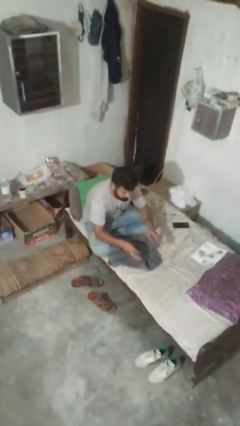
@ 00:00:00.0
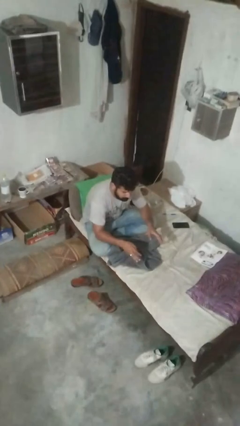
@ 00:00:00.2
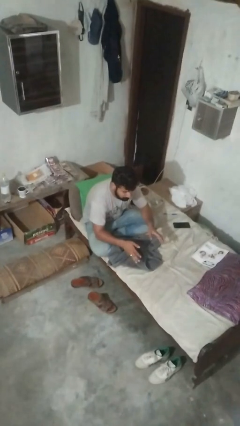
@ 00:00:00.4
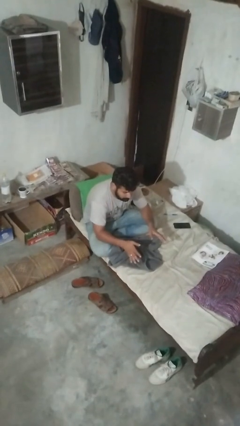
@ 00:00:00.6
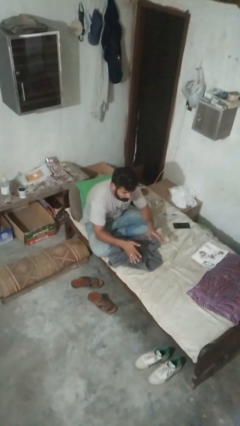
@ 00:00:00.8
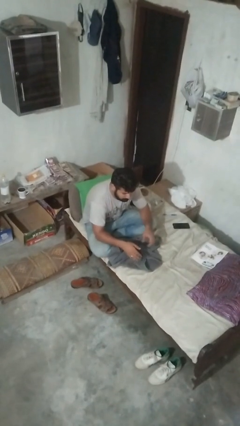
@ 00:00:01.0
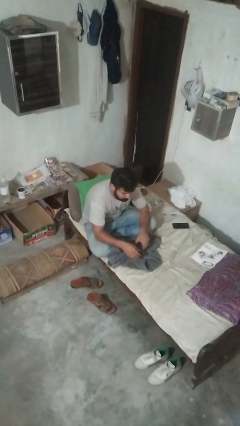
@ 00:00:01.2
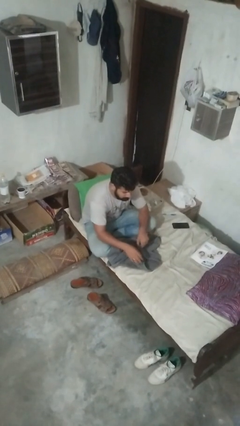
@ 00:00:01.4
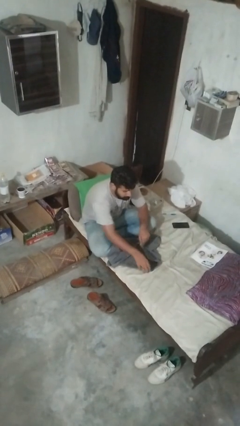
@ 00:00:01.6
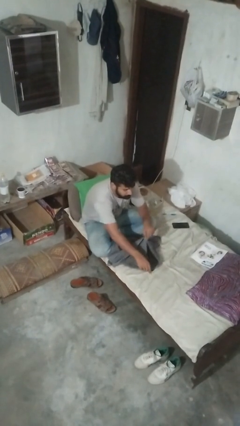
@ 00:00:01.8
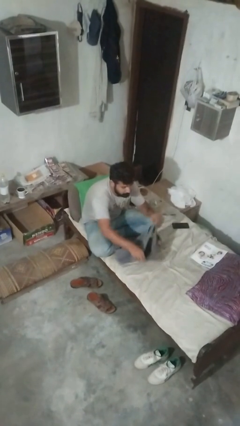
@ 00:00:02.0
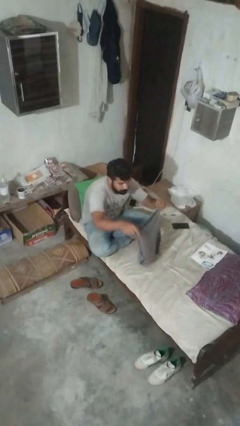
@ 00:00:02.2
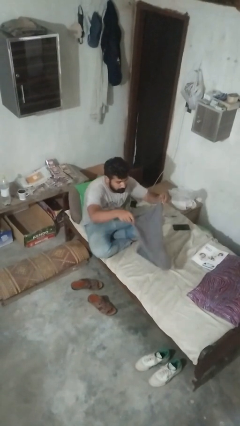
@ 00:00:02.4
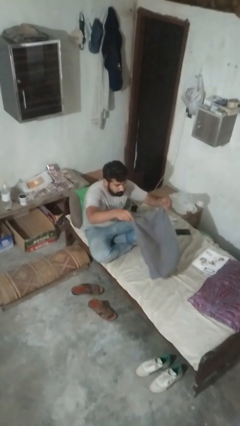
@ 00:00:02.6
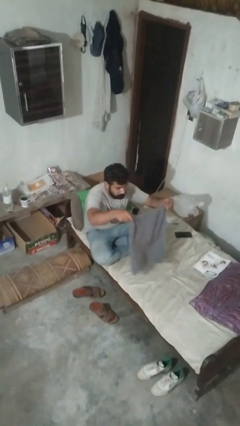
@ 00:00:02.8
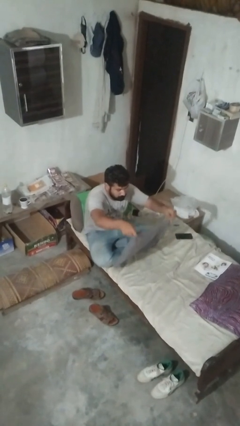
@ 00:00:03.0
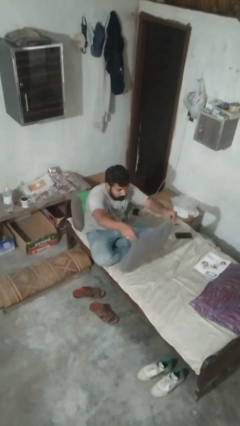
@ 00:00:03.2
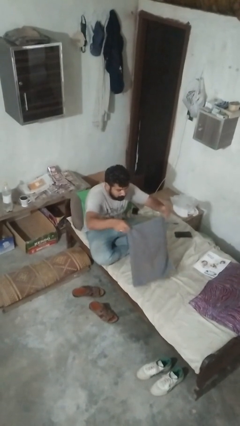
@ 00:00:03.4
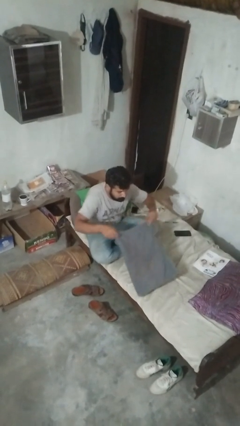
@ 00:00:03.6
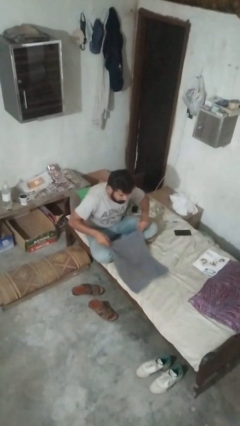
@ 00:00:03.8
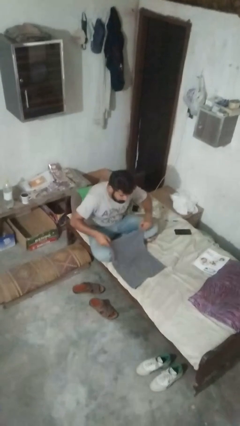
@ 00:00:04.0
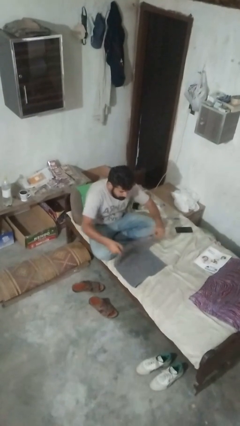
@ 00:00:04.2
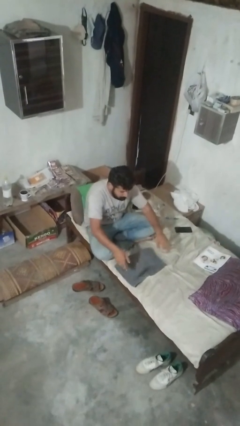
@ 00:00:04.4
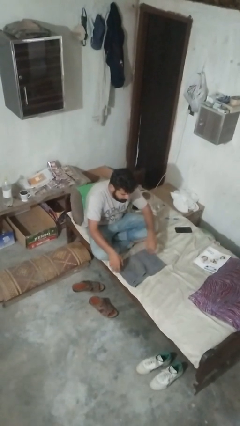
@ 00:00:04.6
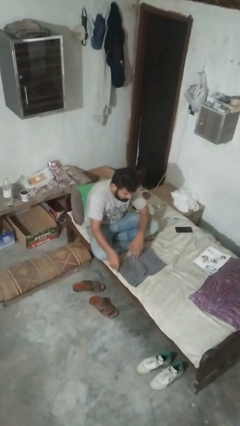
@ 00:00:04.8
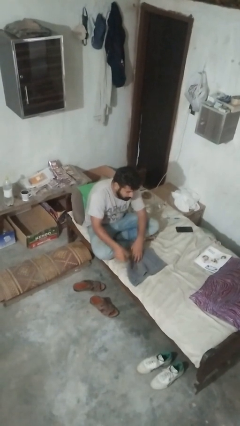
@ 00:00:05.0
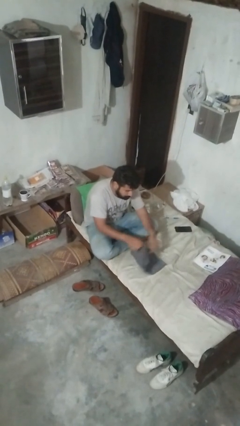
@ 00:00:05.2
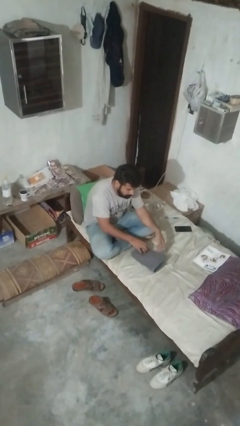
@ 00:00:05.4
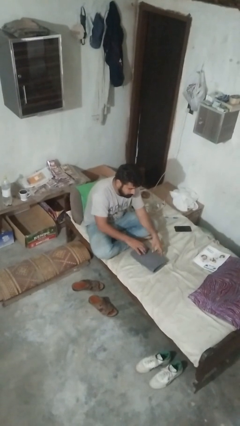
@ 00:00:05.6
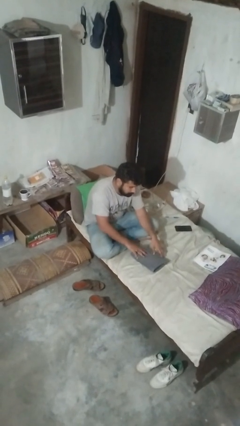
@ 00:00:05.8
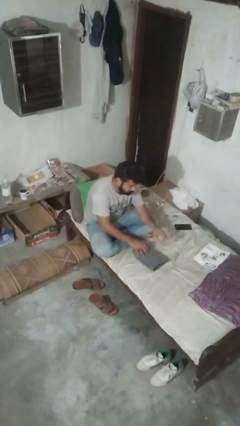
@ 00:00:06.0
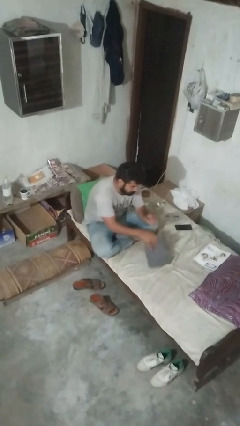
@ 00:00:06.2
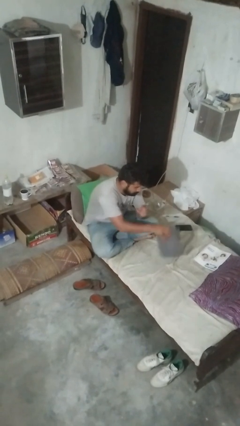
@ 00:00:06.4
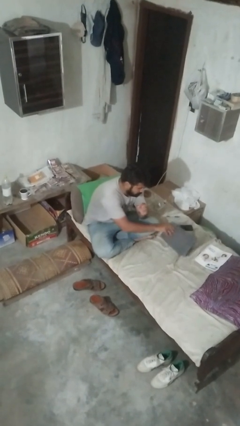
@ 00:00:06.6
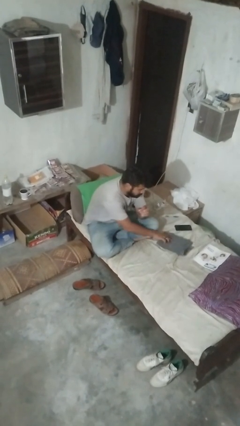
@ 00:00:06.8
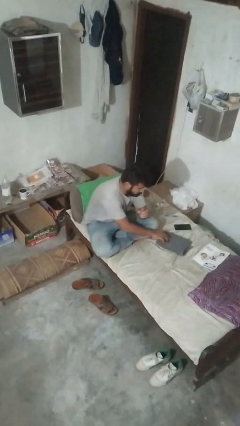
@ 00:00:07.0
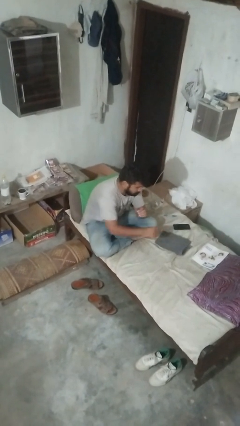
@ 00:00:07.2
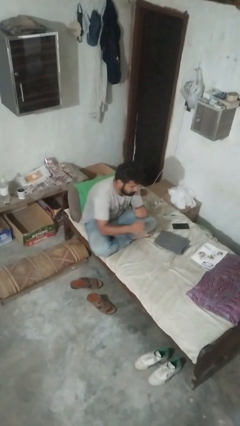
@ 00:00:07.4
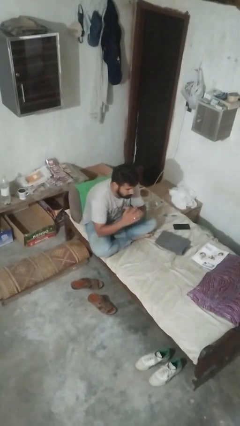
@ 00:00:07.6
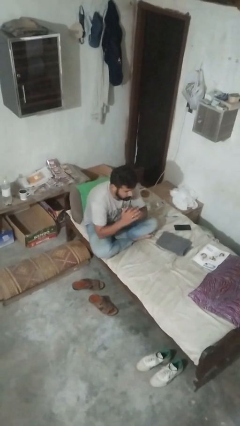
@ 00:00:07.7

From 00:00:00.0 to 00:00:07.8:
person folds towel

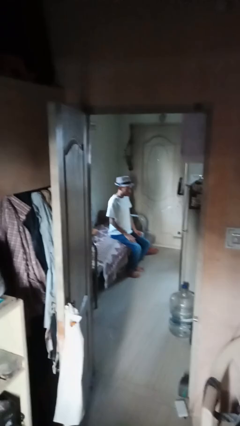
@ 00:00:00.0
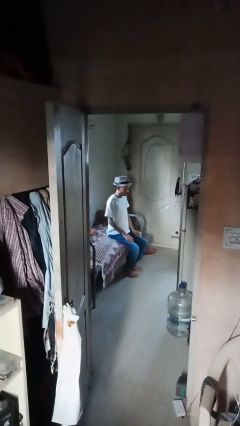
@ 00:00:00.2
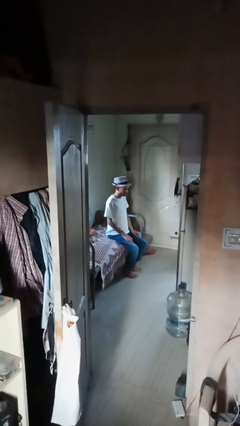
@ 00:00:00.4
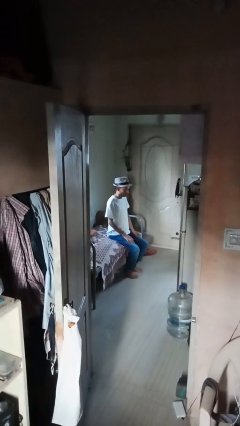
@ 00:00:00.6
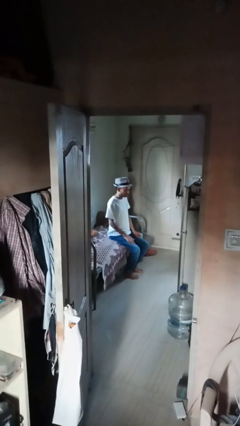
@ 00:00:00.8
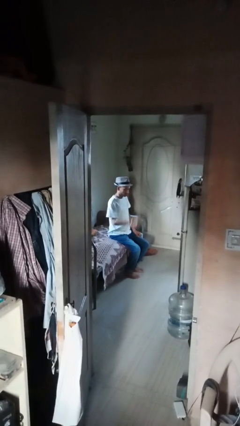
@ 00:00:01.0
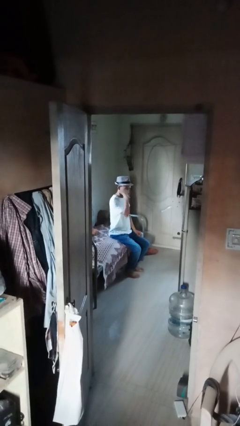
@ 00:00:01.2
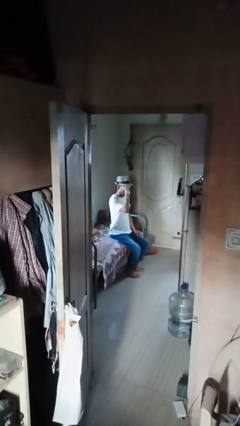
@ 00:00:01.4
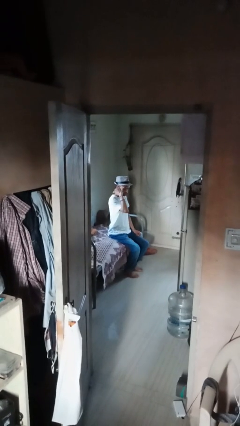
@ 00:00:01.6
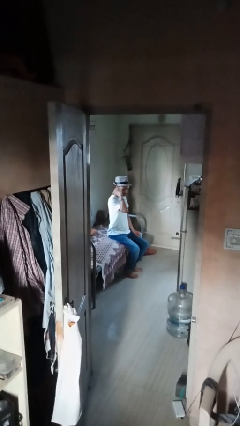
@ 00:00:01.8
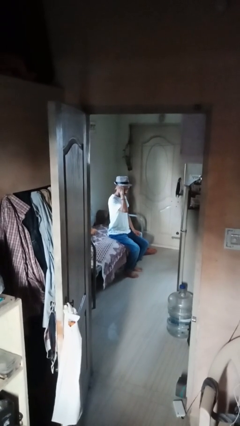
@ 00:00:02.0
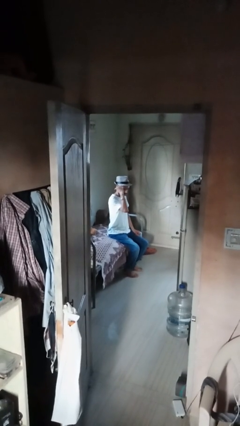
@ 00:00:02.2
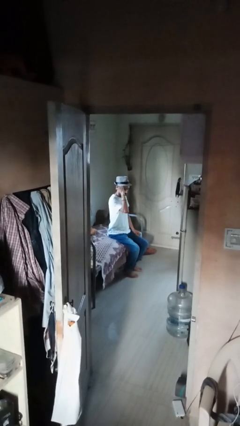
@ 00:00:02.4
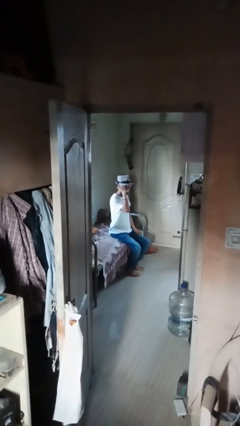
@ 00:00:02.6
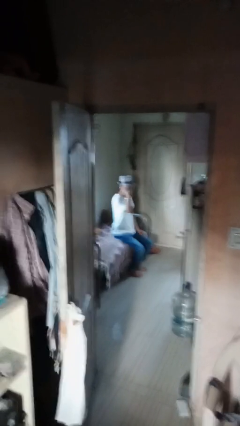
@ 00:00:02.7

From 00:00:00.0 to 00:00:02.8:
person gestures behind me

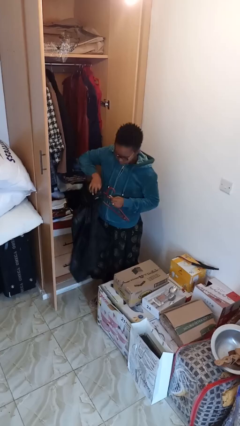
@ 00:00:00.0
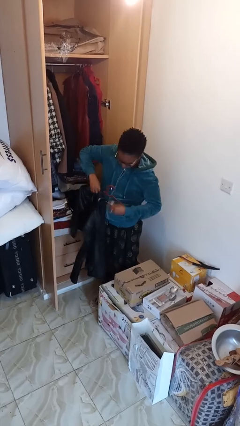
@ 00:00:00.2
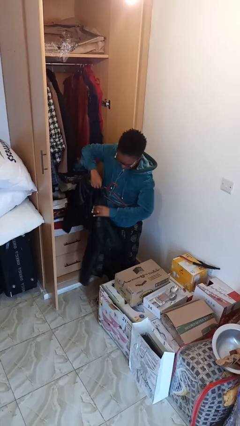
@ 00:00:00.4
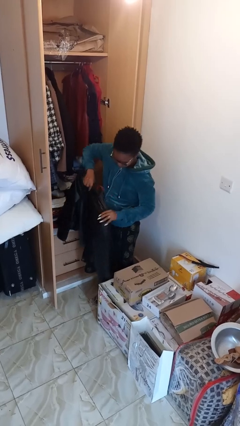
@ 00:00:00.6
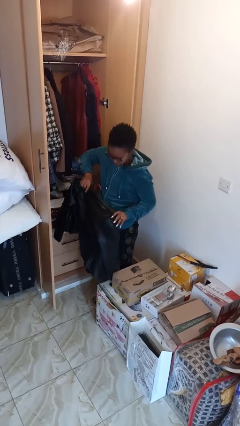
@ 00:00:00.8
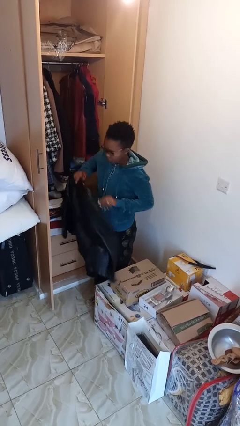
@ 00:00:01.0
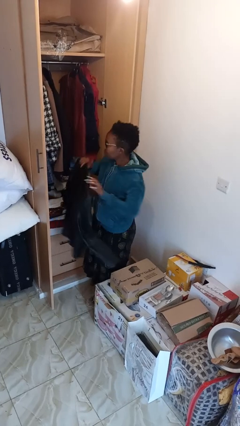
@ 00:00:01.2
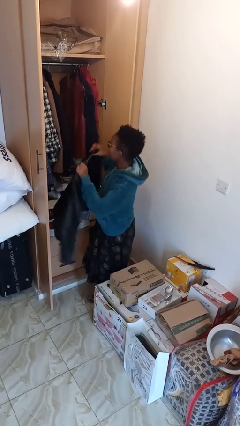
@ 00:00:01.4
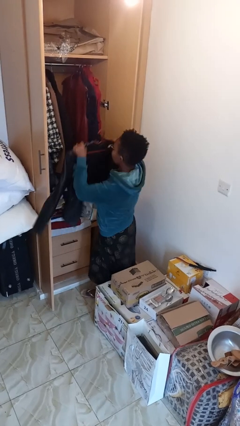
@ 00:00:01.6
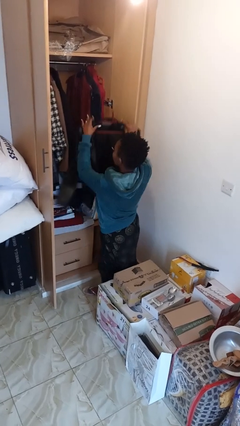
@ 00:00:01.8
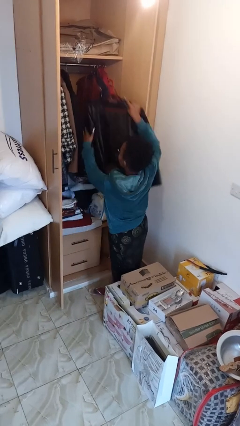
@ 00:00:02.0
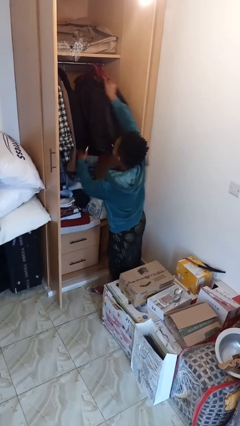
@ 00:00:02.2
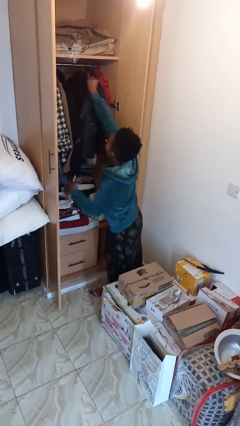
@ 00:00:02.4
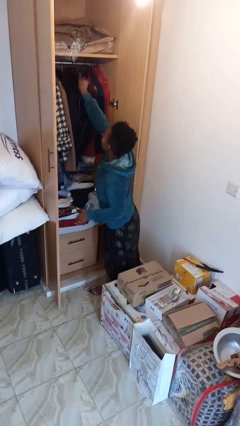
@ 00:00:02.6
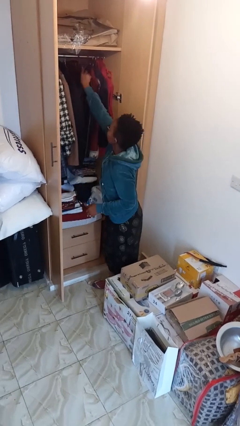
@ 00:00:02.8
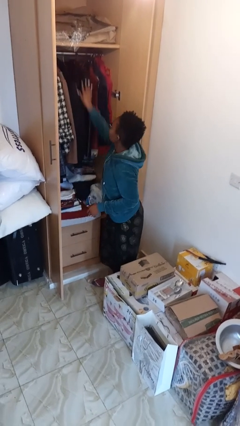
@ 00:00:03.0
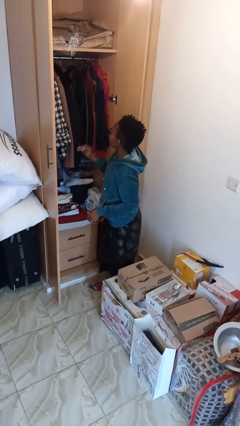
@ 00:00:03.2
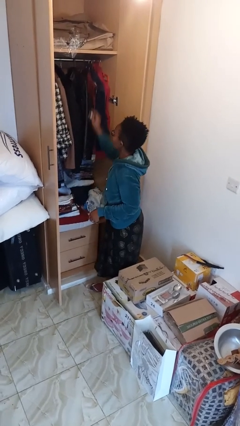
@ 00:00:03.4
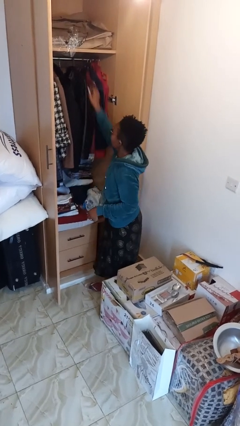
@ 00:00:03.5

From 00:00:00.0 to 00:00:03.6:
person puts clothes into closet

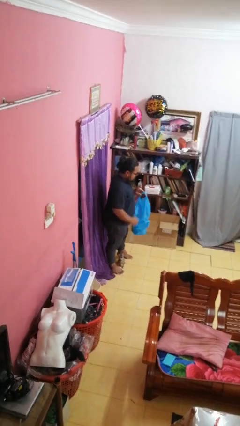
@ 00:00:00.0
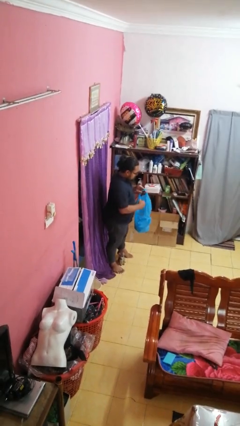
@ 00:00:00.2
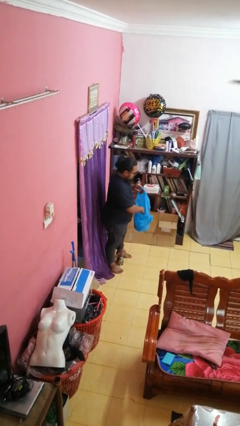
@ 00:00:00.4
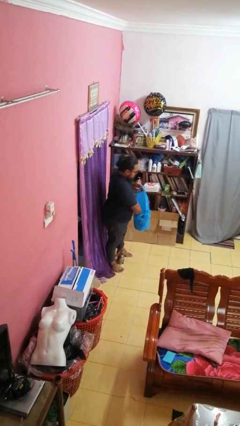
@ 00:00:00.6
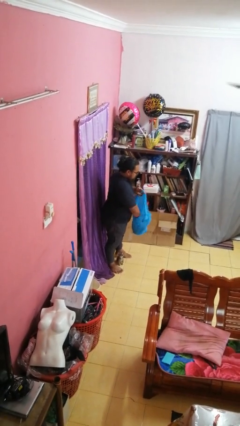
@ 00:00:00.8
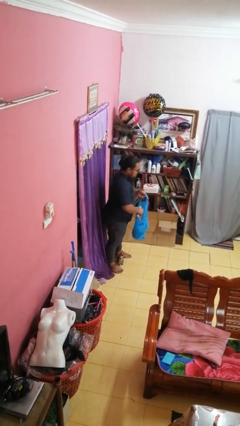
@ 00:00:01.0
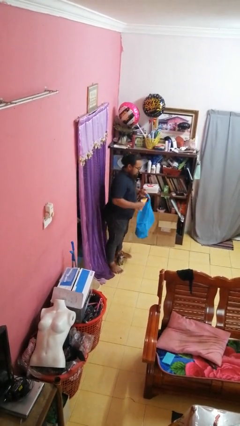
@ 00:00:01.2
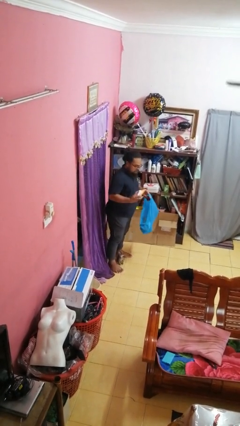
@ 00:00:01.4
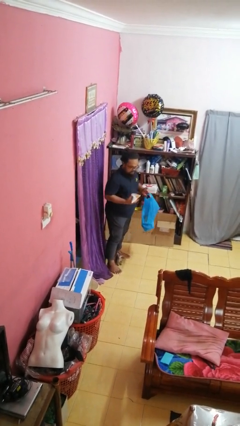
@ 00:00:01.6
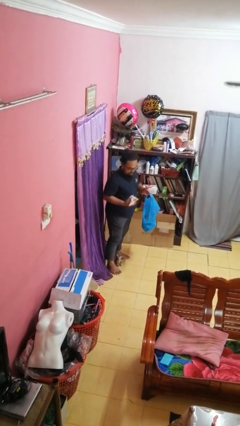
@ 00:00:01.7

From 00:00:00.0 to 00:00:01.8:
person takes object from bag

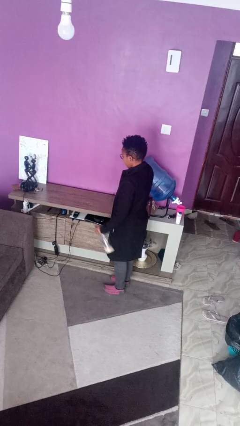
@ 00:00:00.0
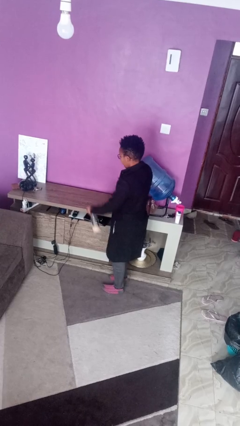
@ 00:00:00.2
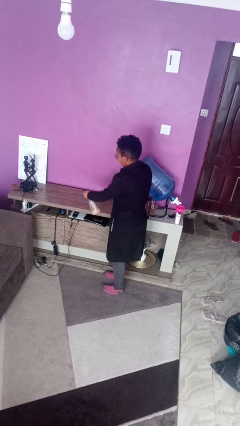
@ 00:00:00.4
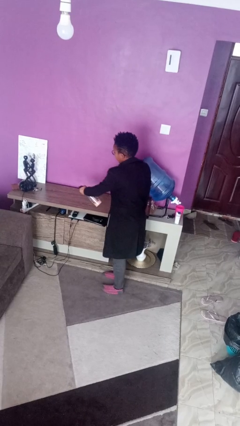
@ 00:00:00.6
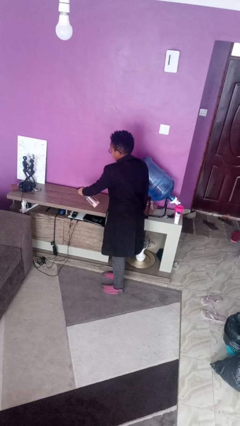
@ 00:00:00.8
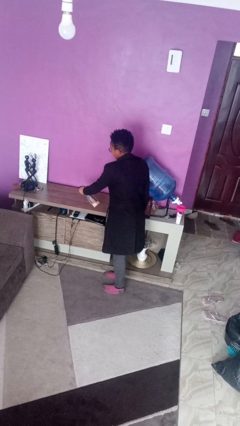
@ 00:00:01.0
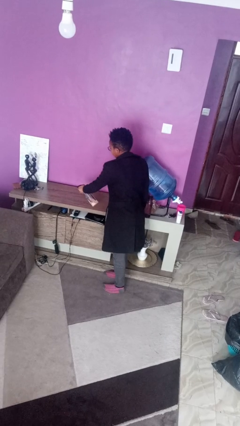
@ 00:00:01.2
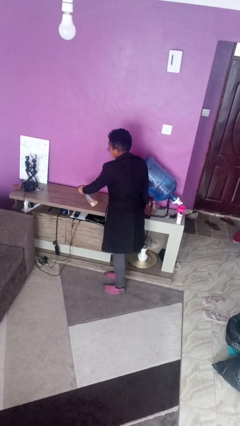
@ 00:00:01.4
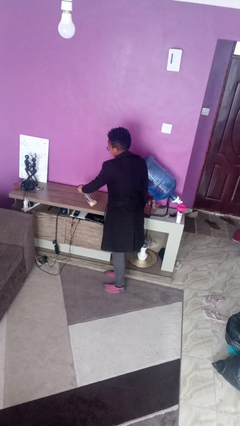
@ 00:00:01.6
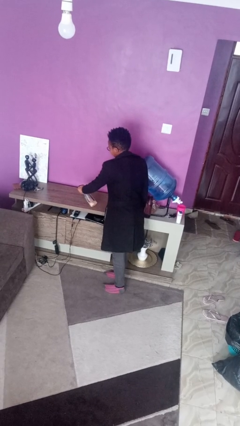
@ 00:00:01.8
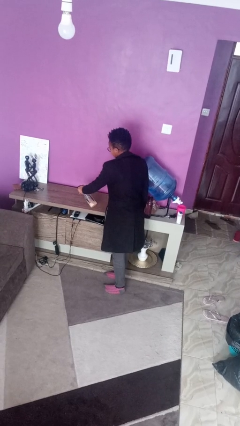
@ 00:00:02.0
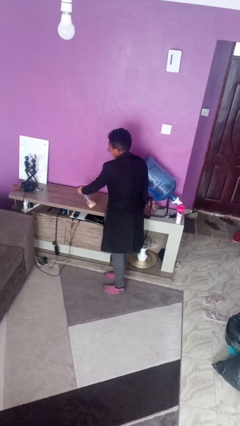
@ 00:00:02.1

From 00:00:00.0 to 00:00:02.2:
person sprays from bottle
